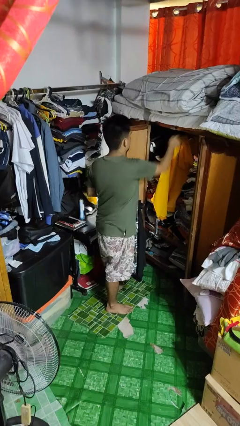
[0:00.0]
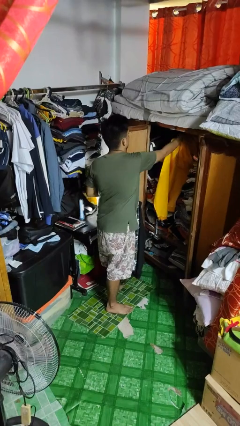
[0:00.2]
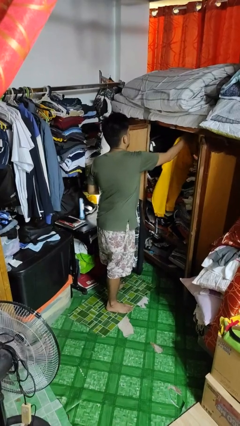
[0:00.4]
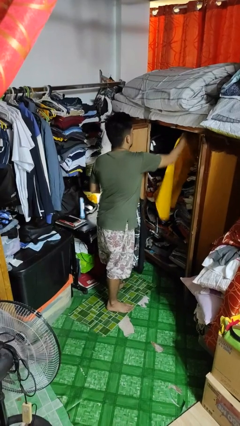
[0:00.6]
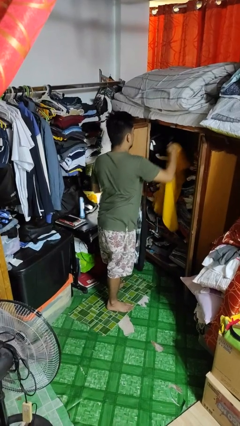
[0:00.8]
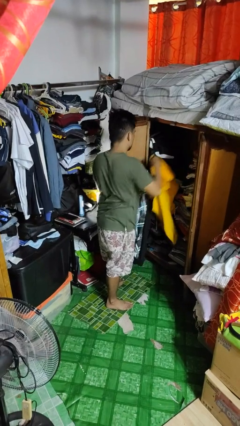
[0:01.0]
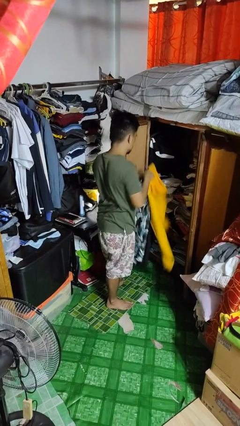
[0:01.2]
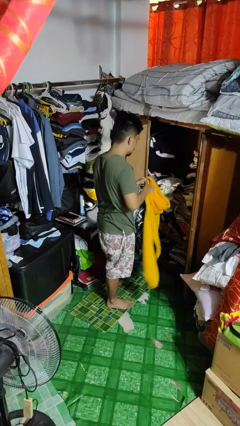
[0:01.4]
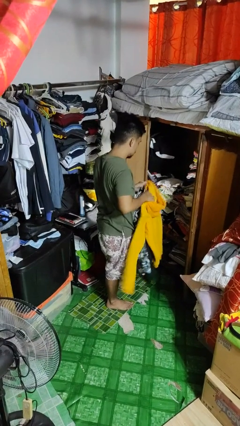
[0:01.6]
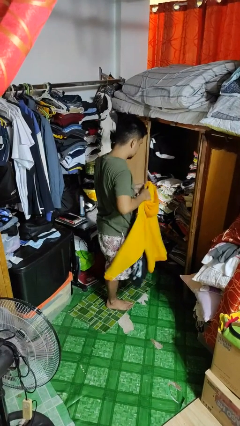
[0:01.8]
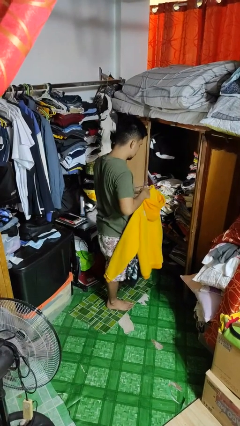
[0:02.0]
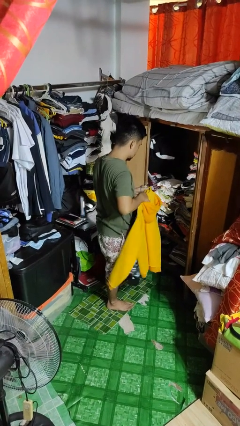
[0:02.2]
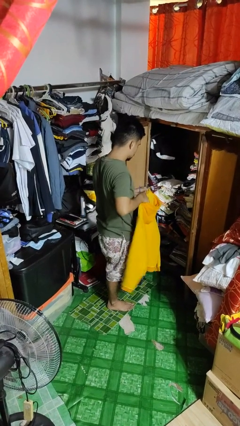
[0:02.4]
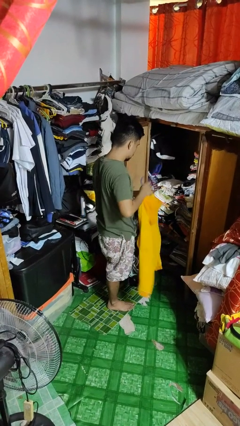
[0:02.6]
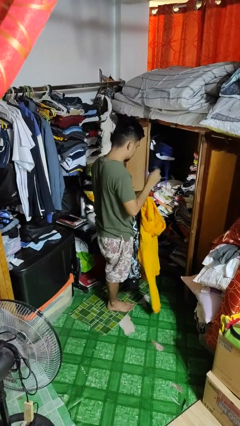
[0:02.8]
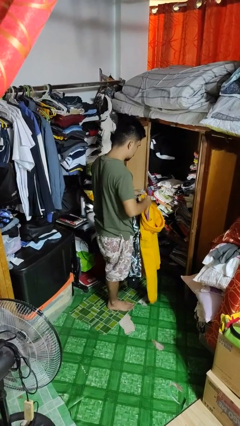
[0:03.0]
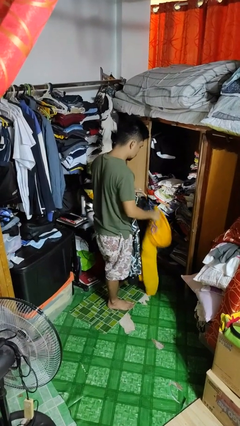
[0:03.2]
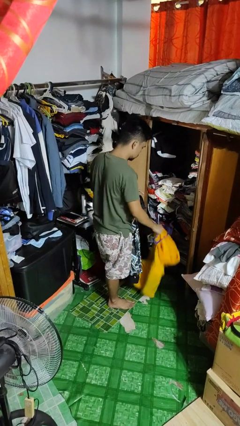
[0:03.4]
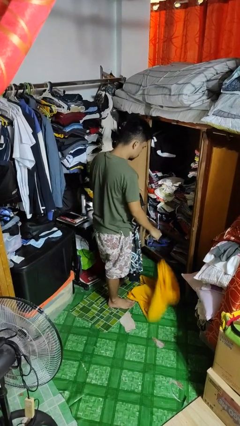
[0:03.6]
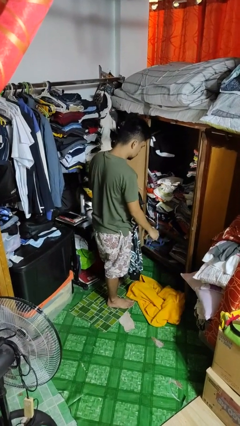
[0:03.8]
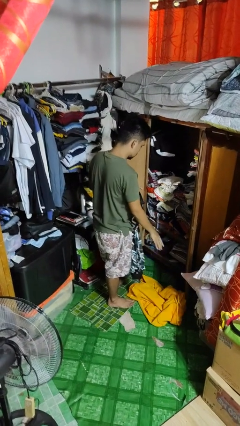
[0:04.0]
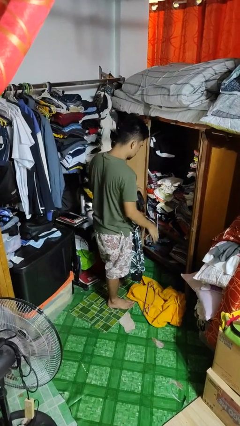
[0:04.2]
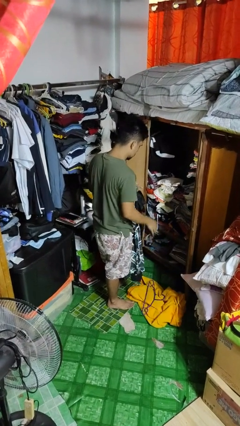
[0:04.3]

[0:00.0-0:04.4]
person takes clothes from closet

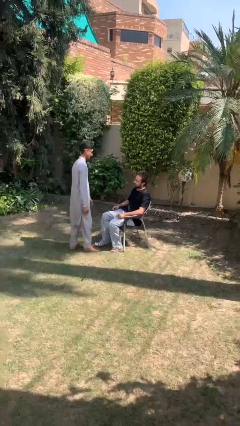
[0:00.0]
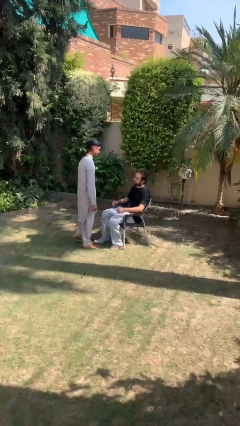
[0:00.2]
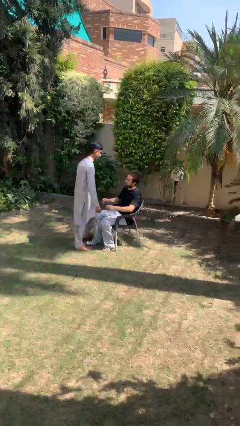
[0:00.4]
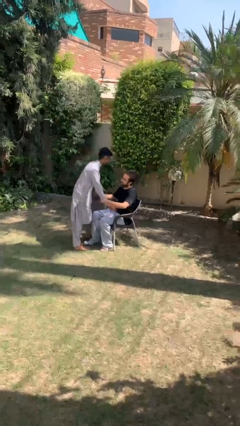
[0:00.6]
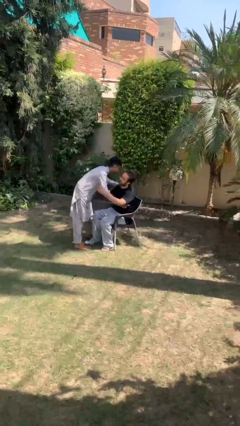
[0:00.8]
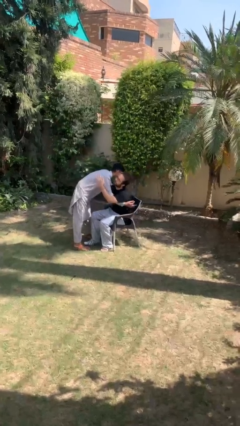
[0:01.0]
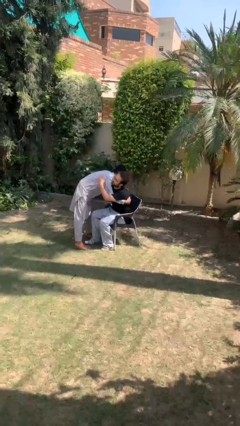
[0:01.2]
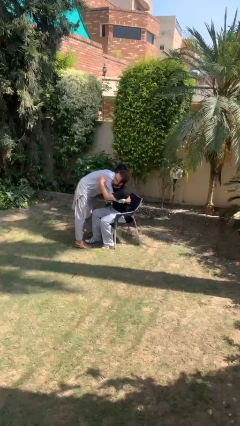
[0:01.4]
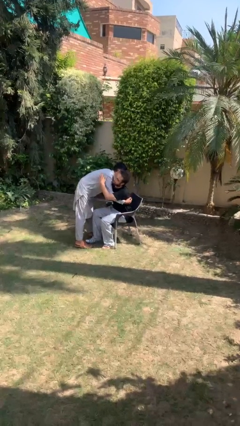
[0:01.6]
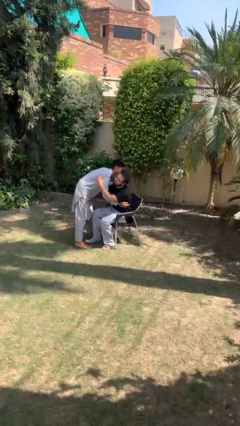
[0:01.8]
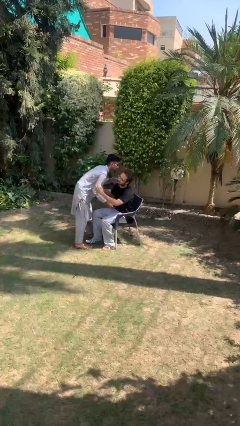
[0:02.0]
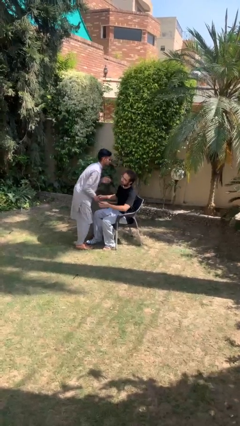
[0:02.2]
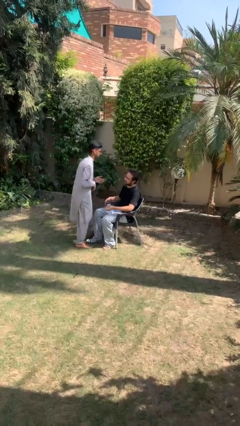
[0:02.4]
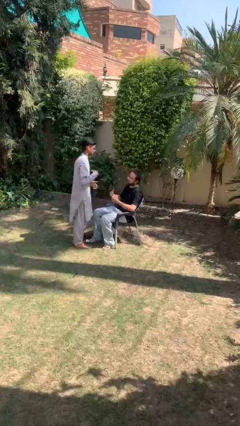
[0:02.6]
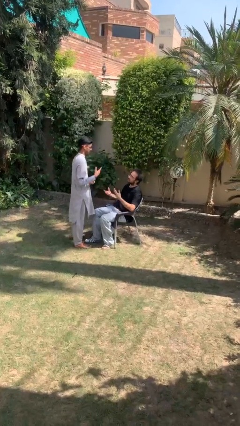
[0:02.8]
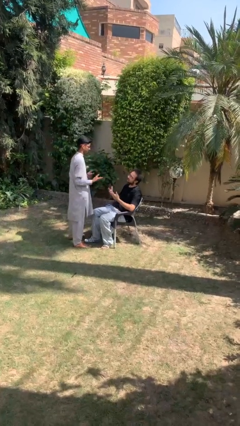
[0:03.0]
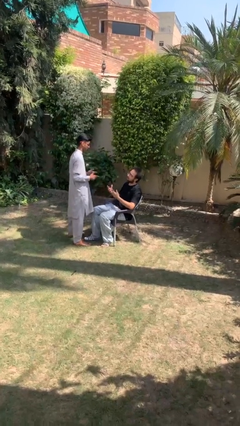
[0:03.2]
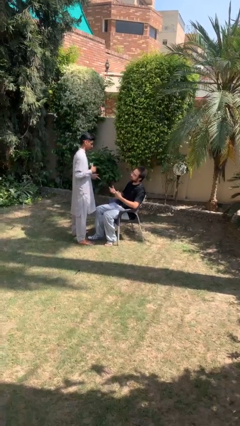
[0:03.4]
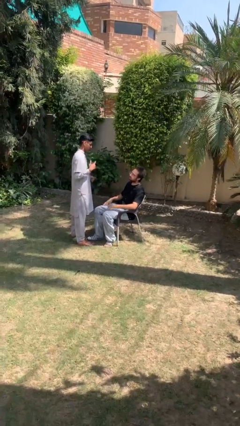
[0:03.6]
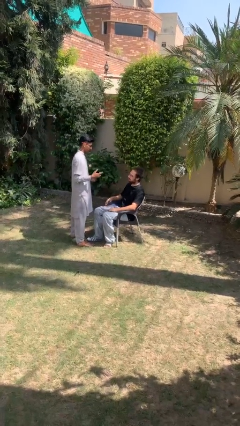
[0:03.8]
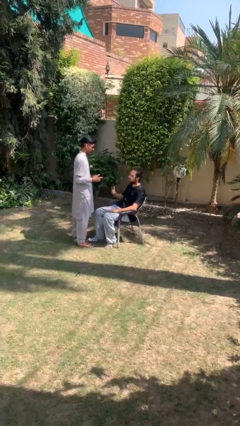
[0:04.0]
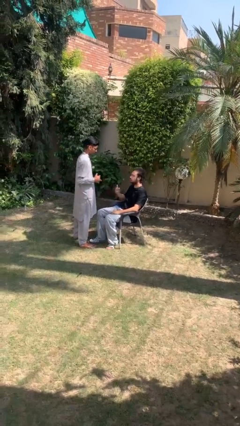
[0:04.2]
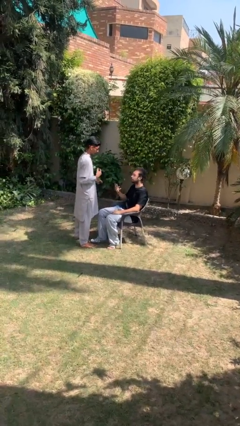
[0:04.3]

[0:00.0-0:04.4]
person embraces person

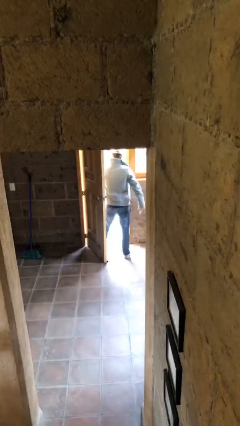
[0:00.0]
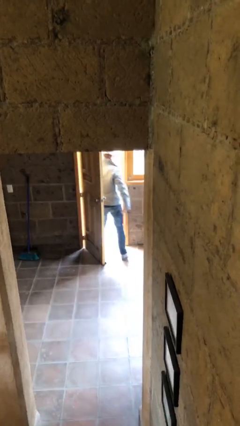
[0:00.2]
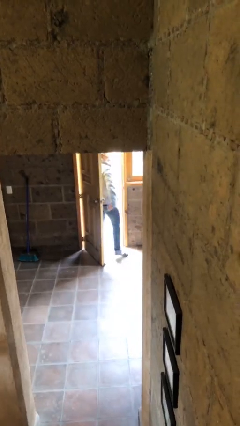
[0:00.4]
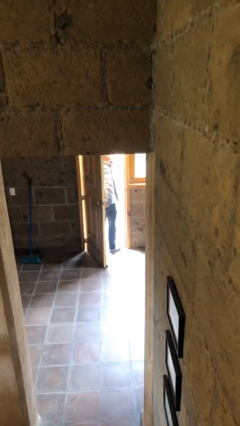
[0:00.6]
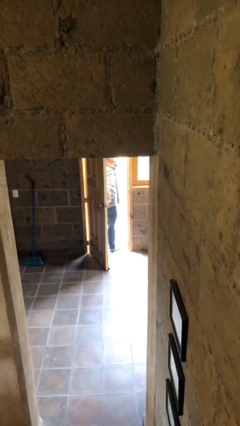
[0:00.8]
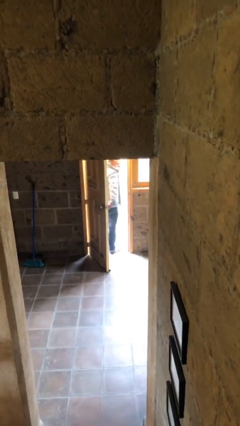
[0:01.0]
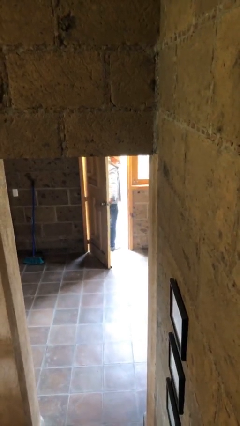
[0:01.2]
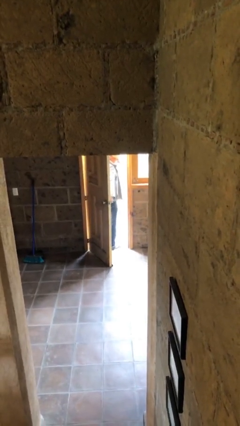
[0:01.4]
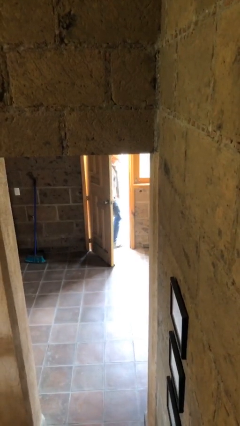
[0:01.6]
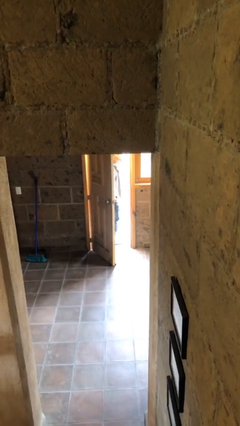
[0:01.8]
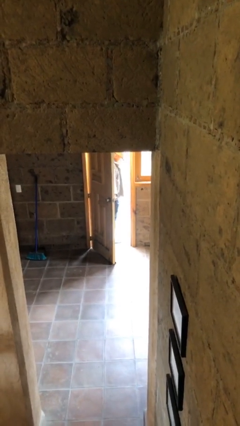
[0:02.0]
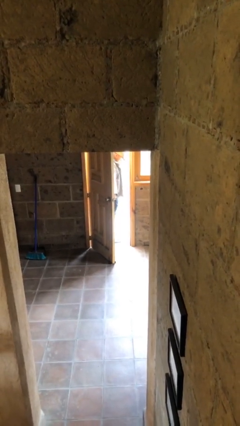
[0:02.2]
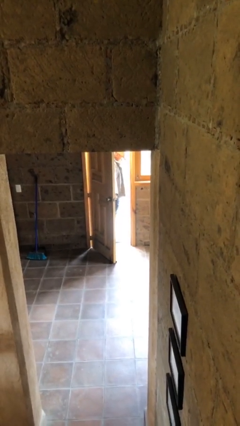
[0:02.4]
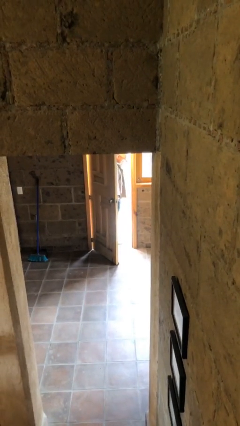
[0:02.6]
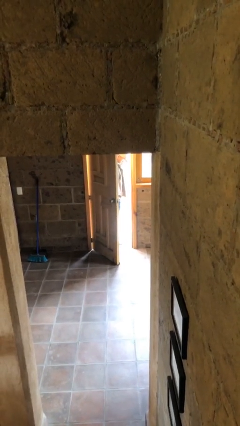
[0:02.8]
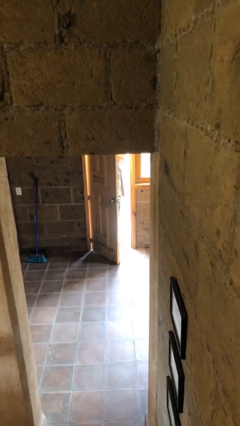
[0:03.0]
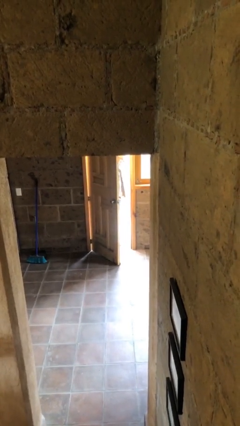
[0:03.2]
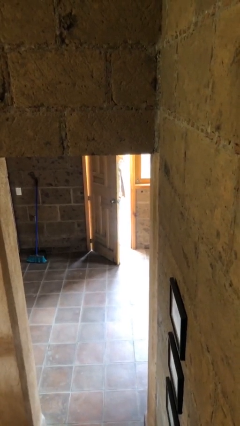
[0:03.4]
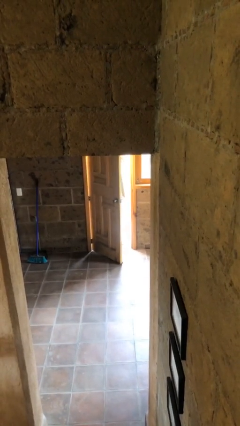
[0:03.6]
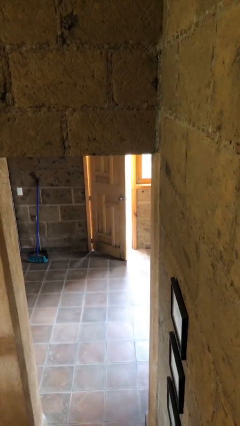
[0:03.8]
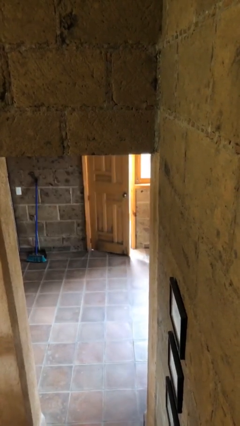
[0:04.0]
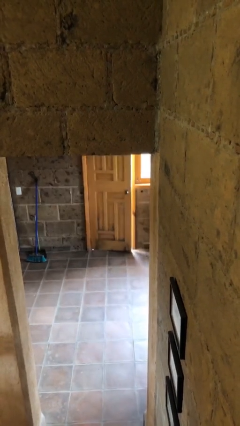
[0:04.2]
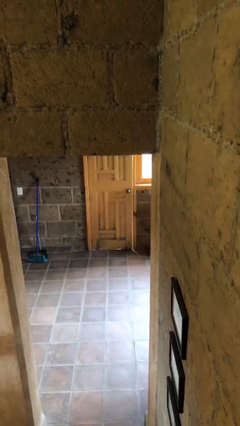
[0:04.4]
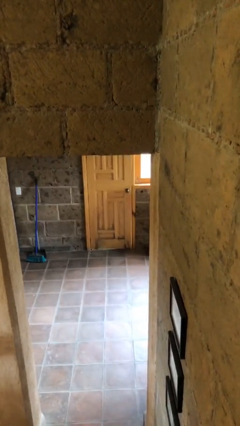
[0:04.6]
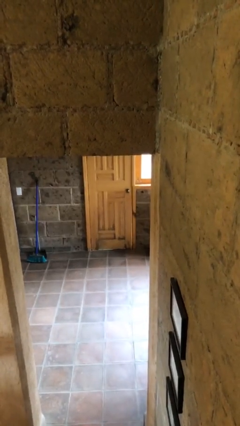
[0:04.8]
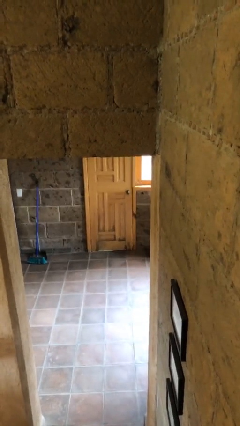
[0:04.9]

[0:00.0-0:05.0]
person closes facility door

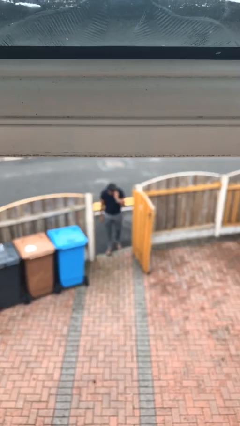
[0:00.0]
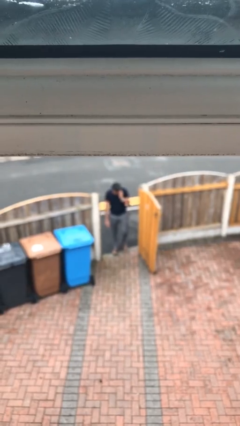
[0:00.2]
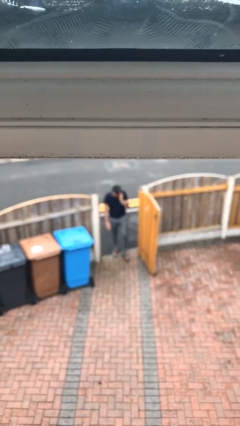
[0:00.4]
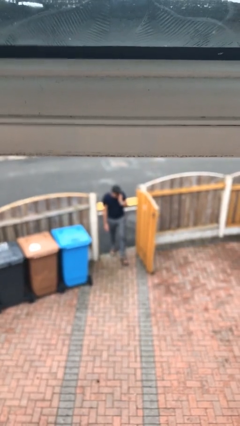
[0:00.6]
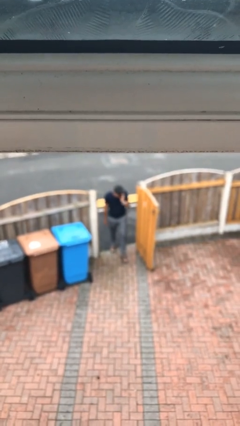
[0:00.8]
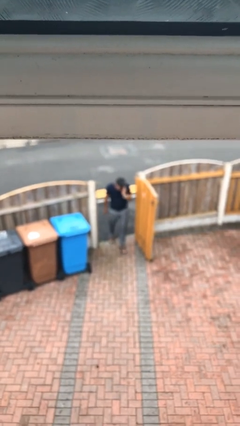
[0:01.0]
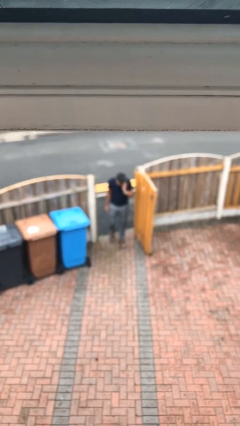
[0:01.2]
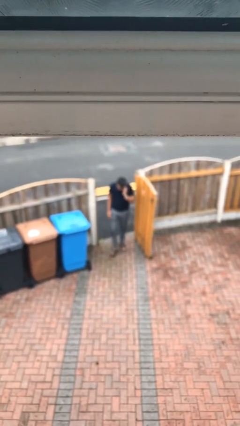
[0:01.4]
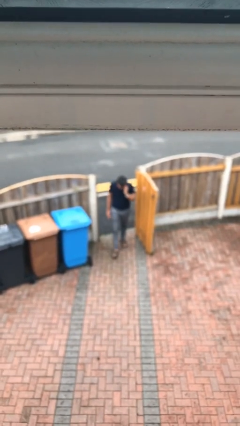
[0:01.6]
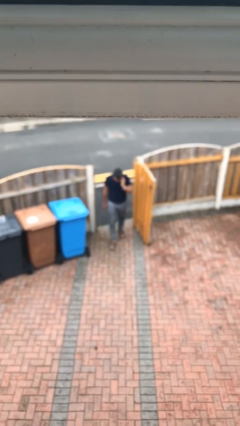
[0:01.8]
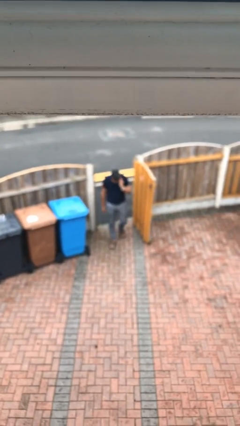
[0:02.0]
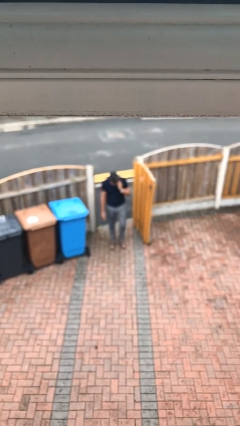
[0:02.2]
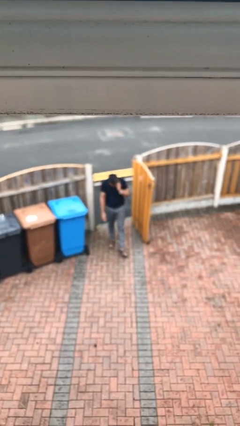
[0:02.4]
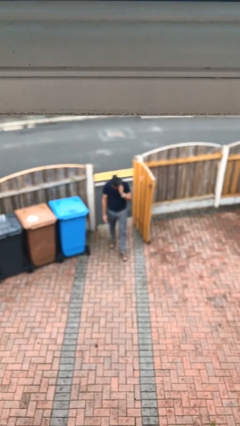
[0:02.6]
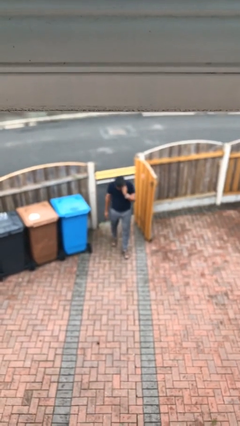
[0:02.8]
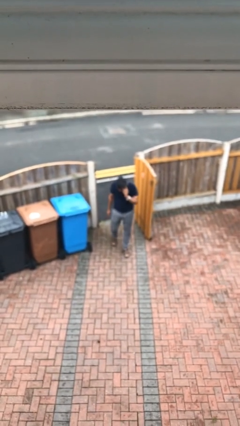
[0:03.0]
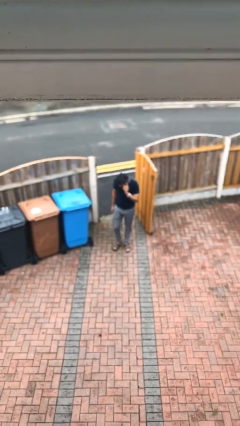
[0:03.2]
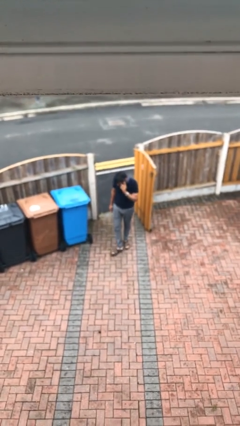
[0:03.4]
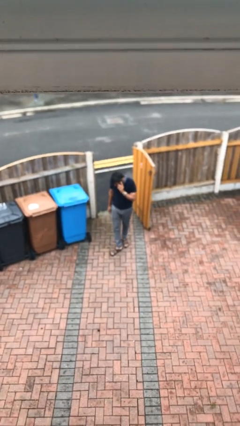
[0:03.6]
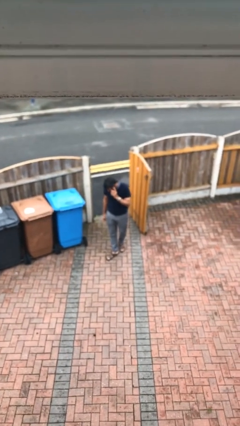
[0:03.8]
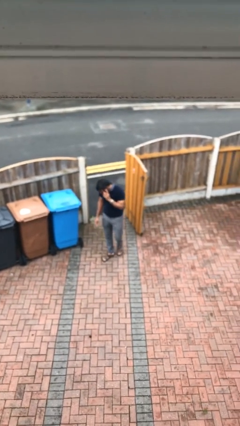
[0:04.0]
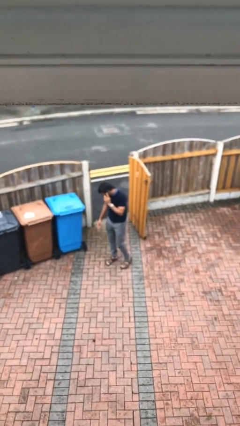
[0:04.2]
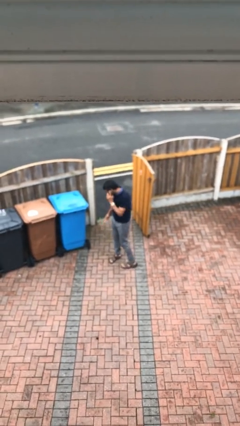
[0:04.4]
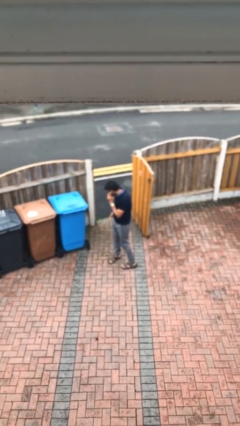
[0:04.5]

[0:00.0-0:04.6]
person enters scene through structure
